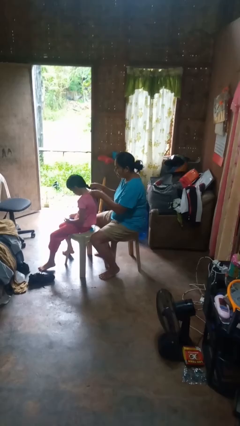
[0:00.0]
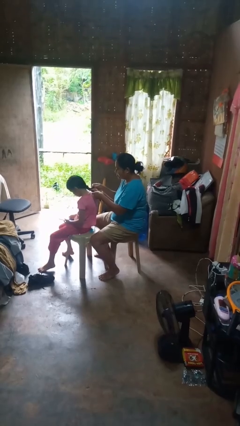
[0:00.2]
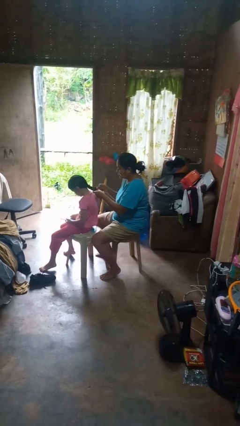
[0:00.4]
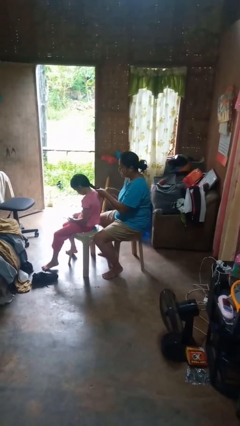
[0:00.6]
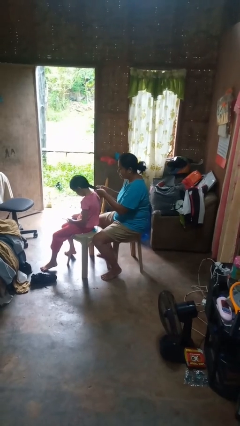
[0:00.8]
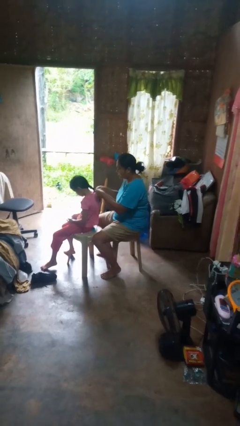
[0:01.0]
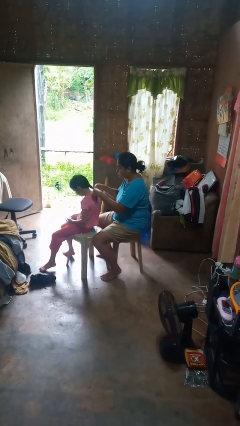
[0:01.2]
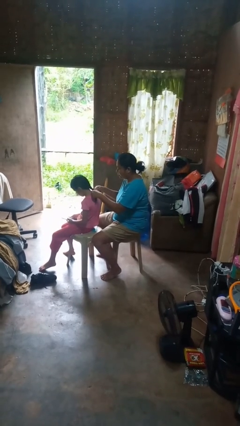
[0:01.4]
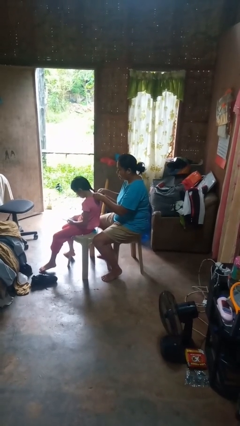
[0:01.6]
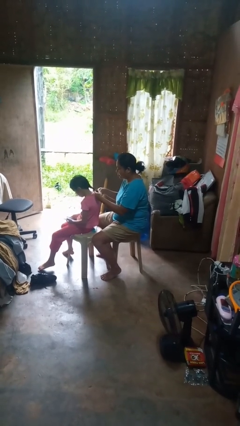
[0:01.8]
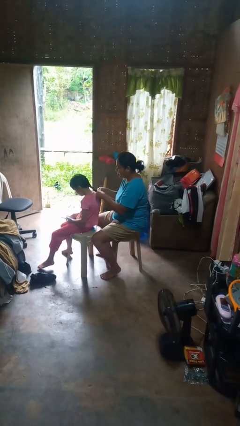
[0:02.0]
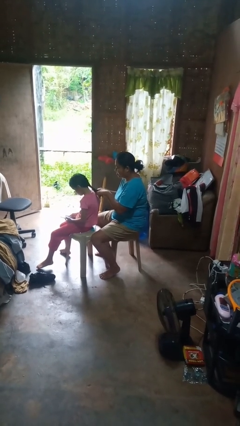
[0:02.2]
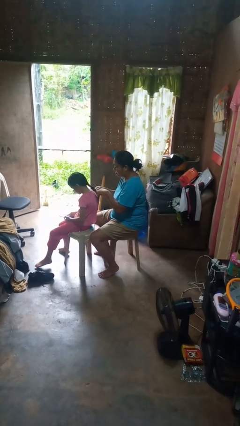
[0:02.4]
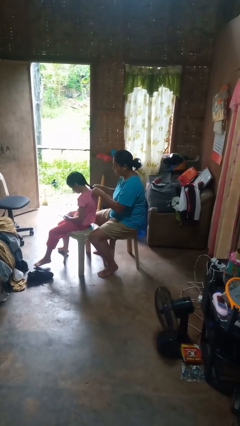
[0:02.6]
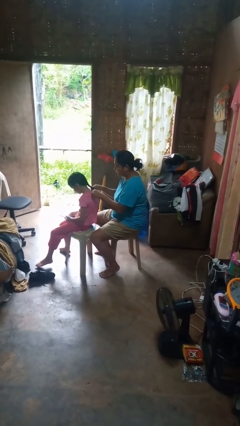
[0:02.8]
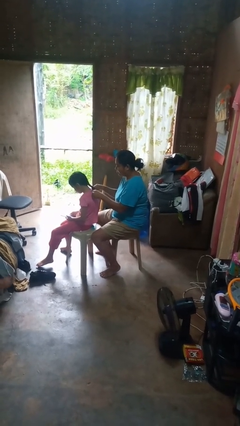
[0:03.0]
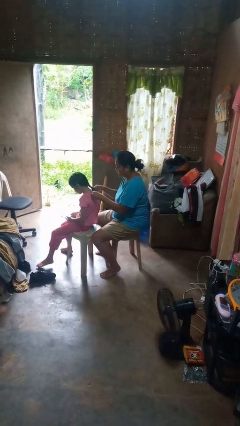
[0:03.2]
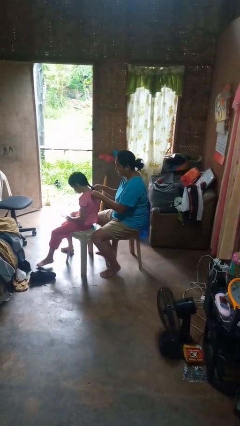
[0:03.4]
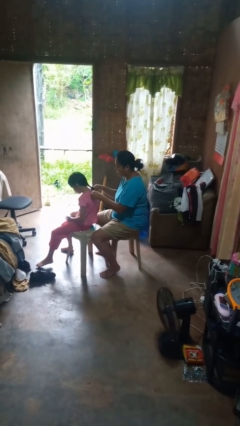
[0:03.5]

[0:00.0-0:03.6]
person braids hair of person

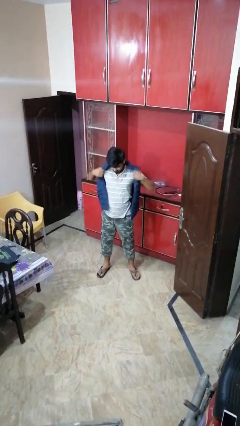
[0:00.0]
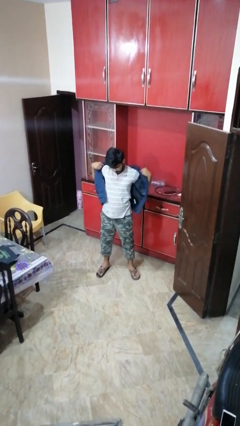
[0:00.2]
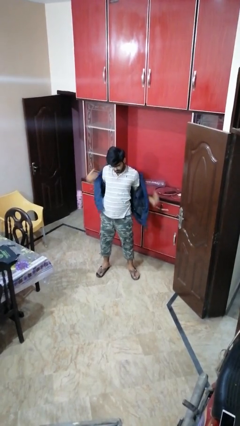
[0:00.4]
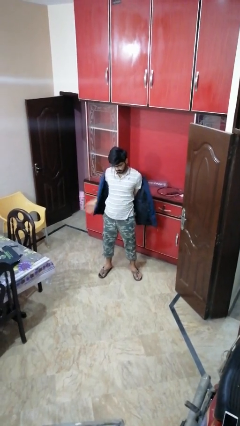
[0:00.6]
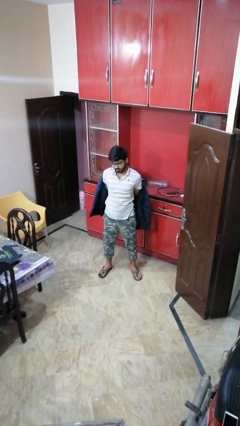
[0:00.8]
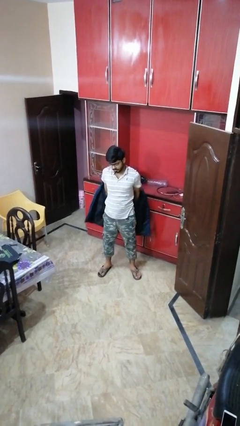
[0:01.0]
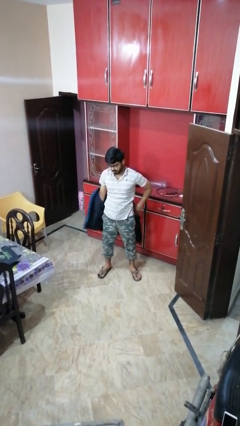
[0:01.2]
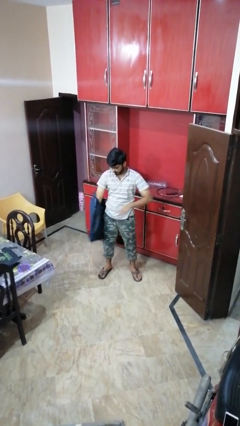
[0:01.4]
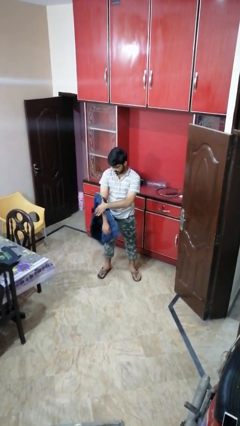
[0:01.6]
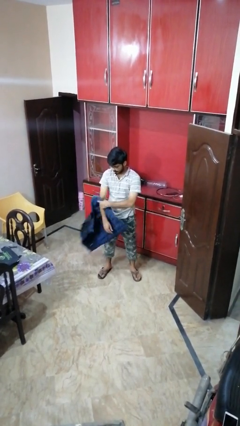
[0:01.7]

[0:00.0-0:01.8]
person takes off jacket

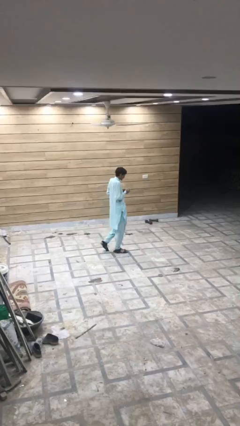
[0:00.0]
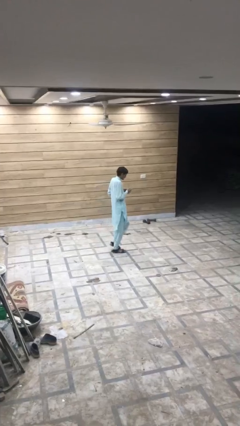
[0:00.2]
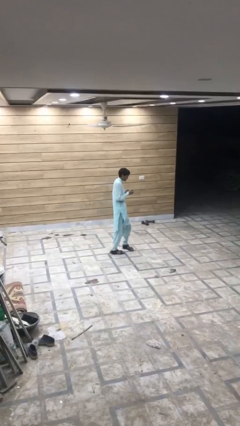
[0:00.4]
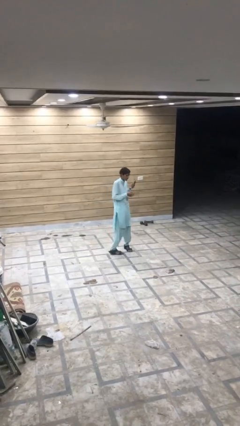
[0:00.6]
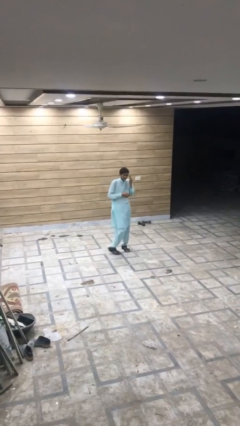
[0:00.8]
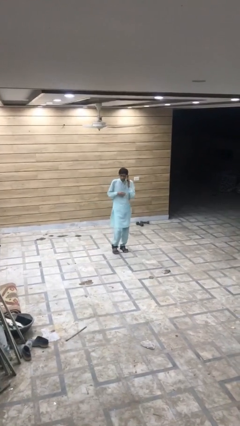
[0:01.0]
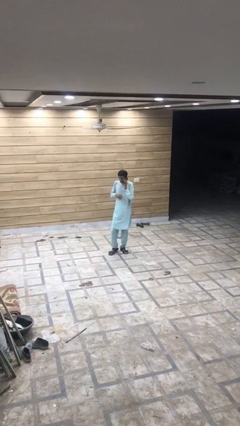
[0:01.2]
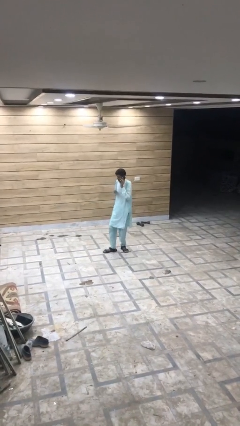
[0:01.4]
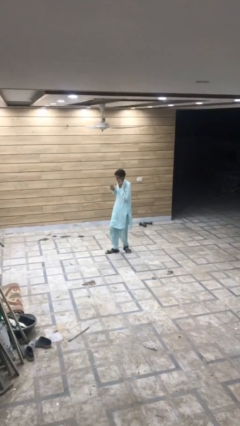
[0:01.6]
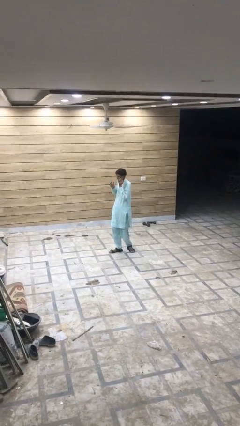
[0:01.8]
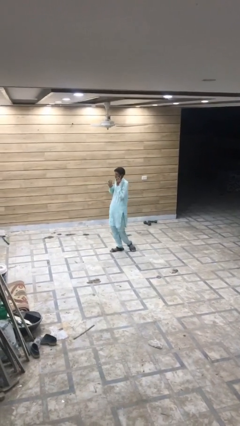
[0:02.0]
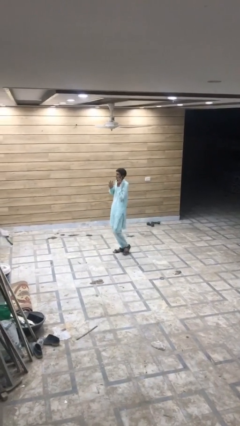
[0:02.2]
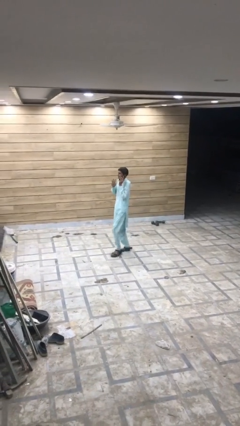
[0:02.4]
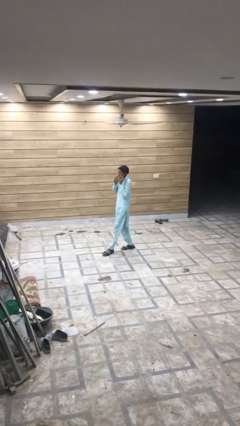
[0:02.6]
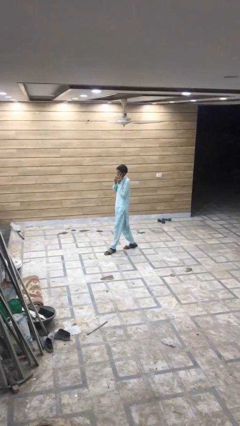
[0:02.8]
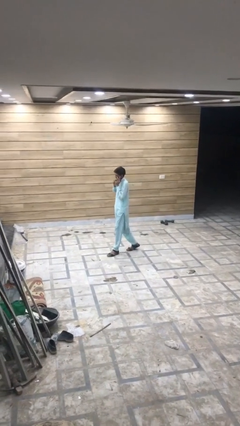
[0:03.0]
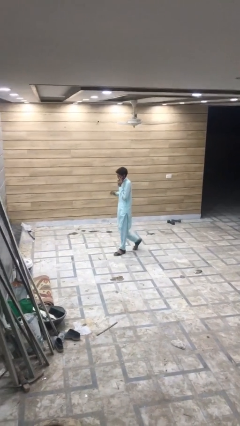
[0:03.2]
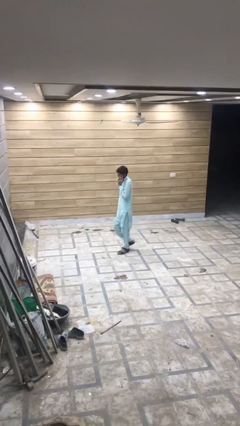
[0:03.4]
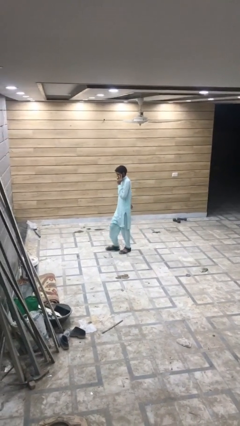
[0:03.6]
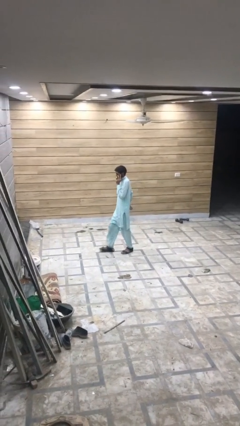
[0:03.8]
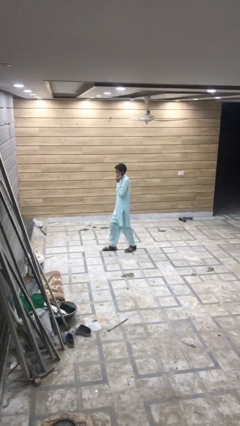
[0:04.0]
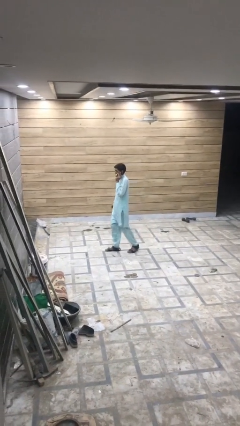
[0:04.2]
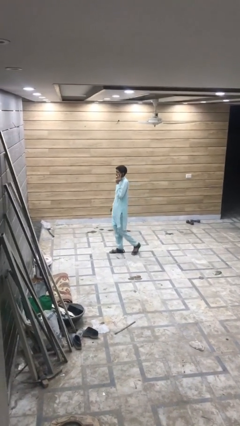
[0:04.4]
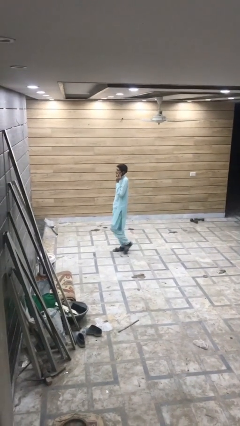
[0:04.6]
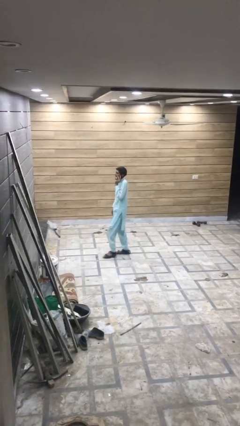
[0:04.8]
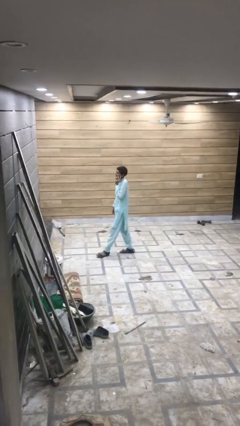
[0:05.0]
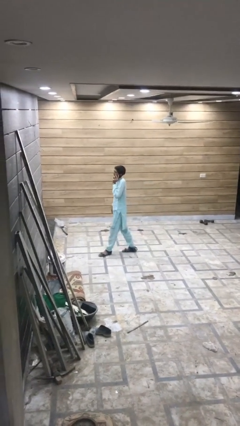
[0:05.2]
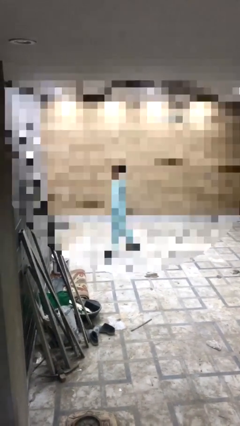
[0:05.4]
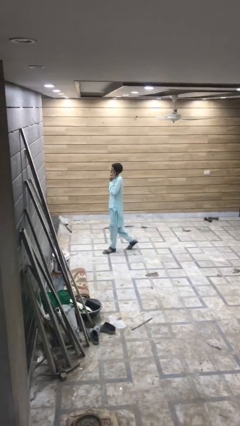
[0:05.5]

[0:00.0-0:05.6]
person talks on phone

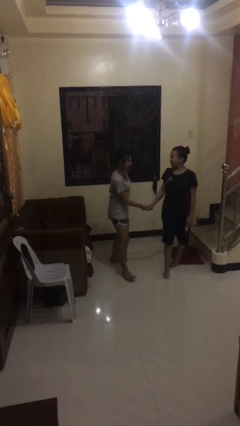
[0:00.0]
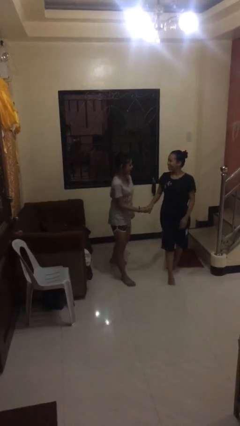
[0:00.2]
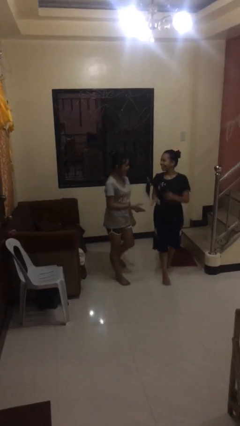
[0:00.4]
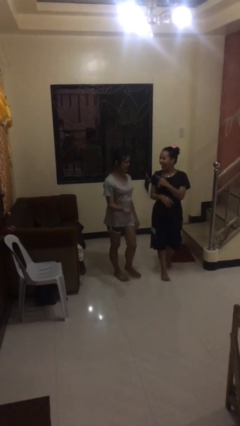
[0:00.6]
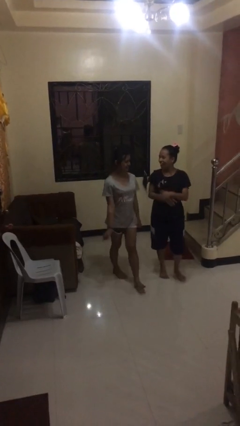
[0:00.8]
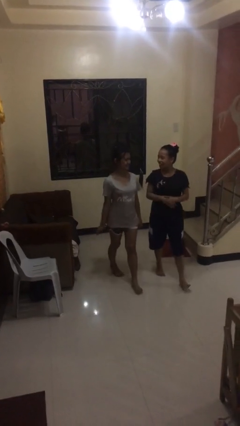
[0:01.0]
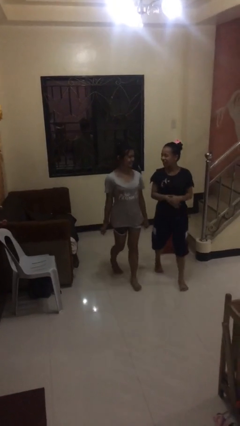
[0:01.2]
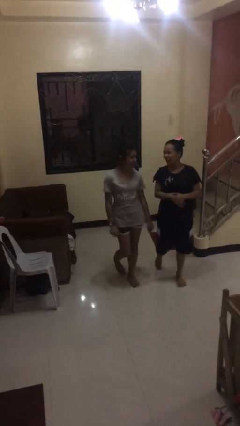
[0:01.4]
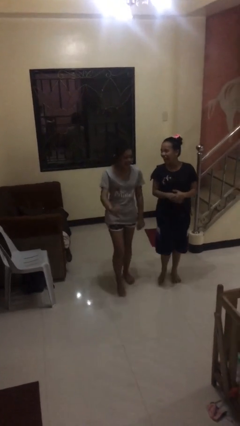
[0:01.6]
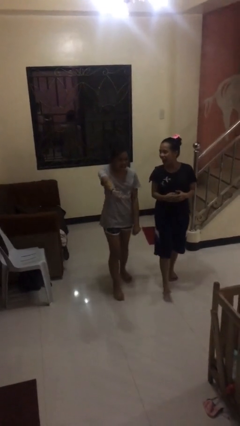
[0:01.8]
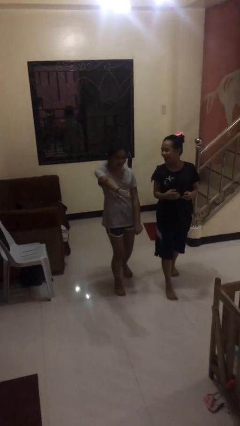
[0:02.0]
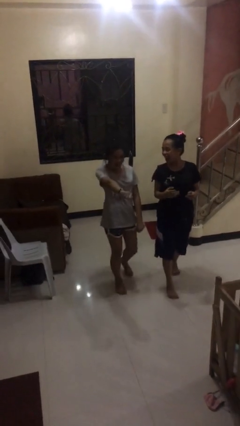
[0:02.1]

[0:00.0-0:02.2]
person talks to person

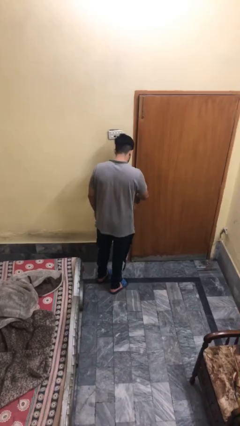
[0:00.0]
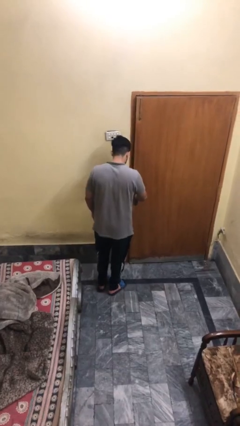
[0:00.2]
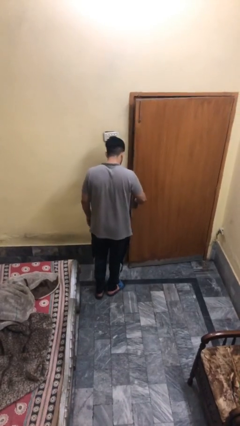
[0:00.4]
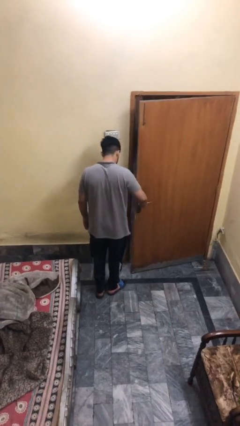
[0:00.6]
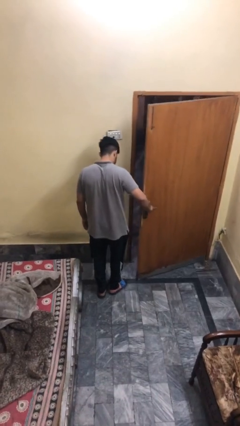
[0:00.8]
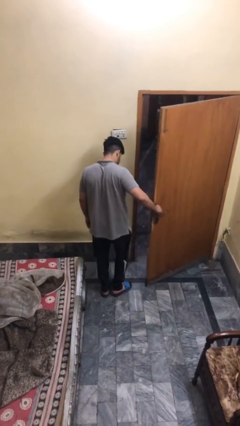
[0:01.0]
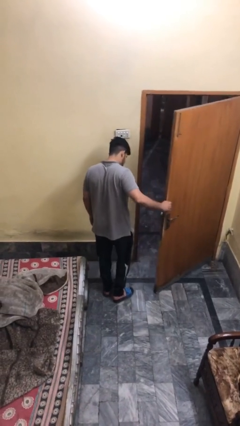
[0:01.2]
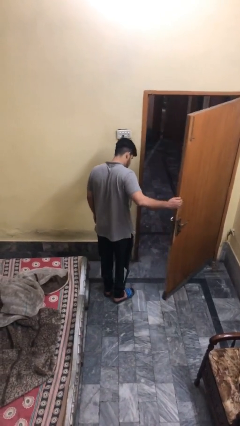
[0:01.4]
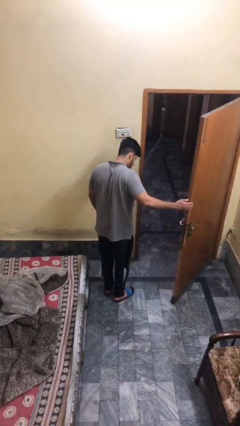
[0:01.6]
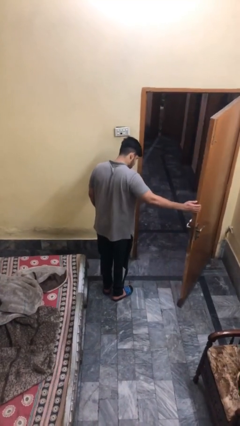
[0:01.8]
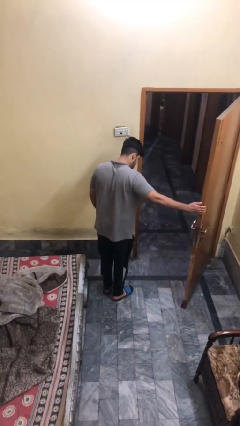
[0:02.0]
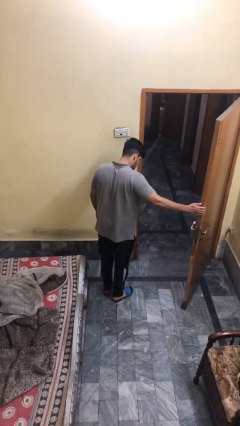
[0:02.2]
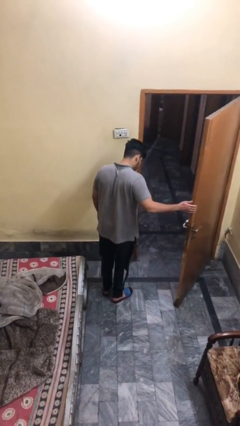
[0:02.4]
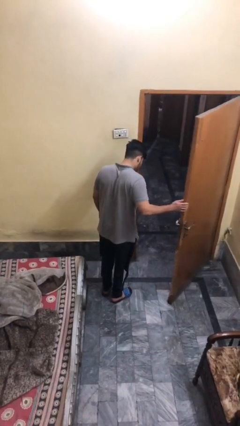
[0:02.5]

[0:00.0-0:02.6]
person opens facility door

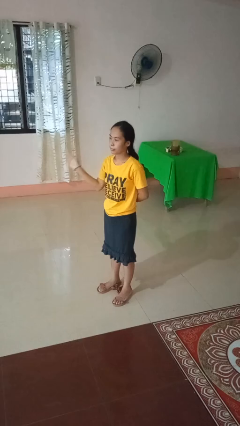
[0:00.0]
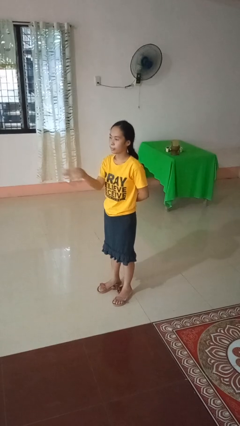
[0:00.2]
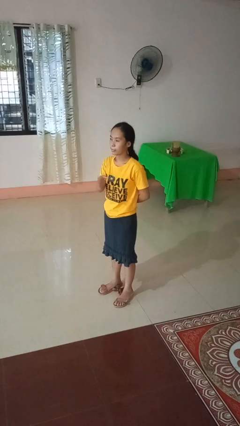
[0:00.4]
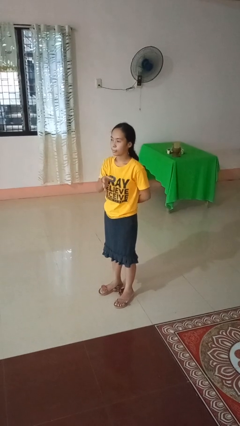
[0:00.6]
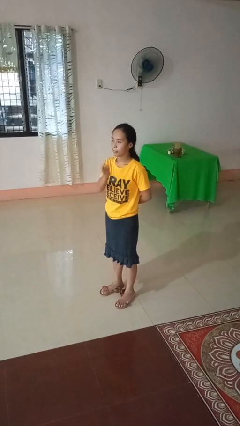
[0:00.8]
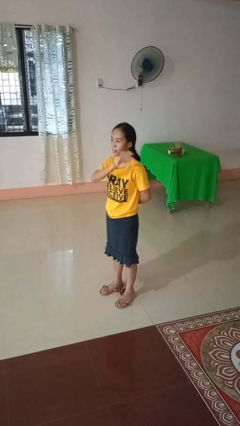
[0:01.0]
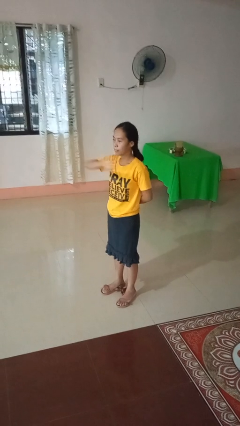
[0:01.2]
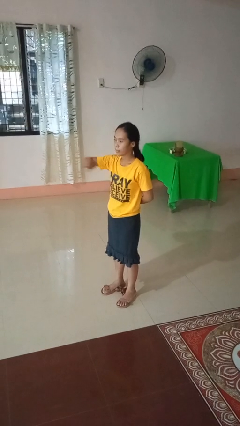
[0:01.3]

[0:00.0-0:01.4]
person gestures swipe left
